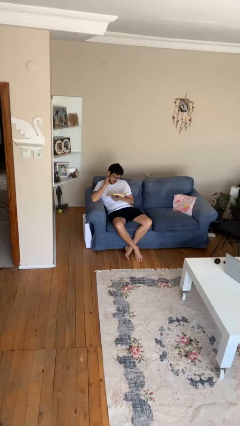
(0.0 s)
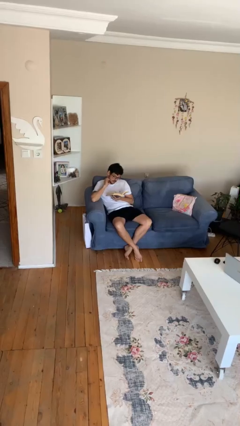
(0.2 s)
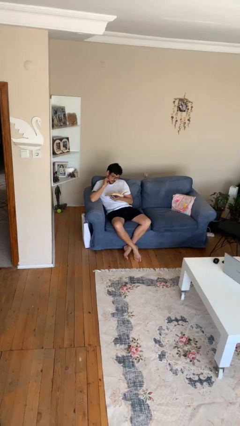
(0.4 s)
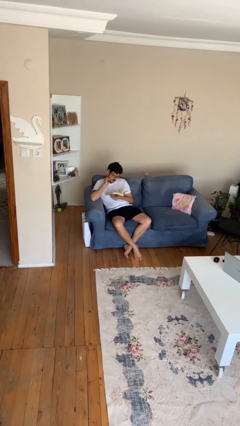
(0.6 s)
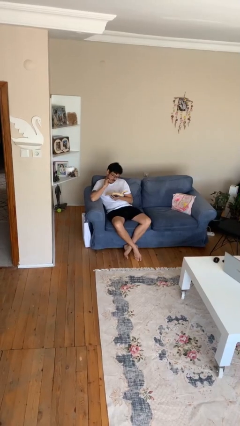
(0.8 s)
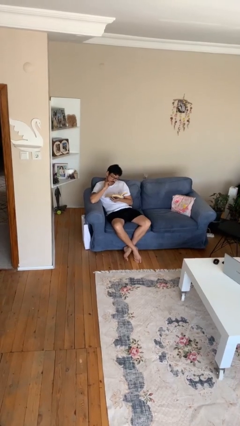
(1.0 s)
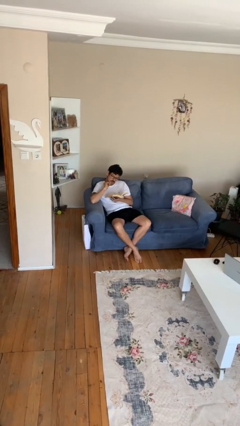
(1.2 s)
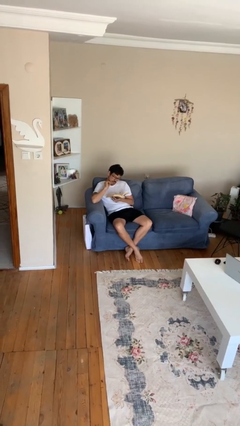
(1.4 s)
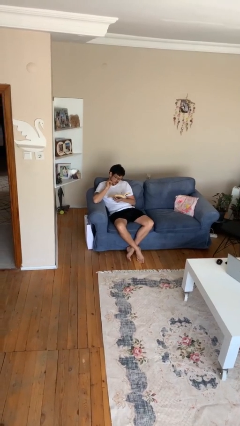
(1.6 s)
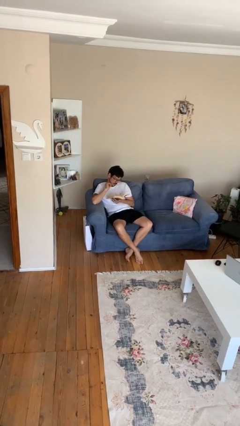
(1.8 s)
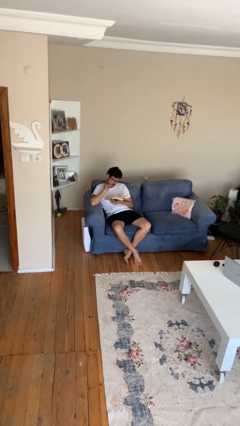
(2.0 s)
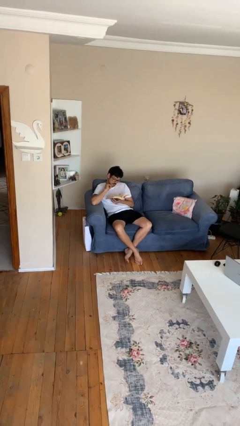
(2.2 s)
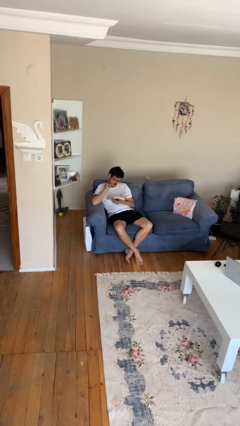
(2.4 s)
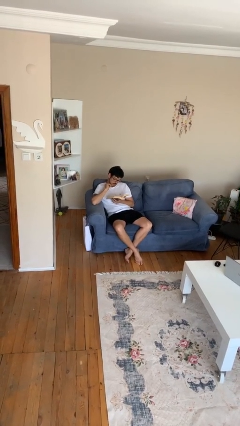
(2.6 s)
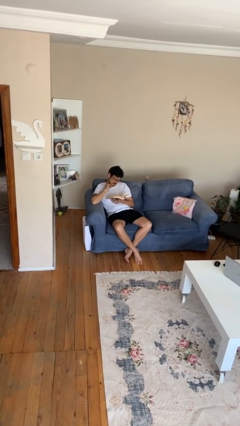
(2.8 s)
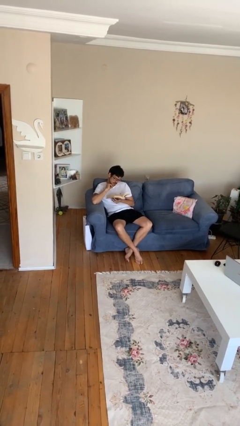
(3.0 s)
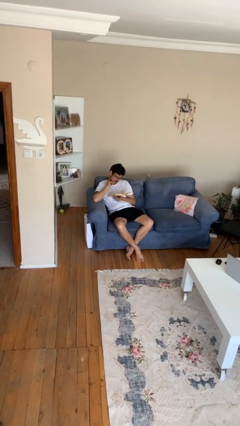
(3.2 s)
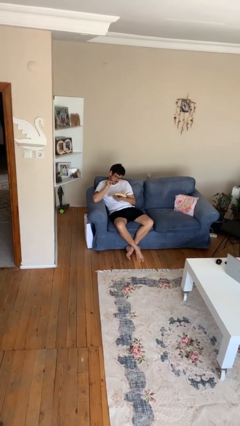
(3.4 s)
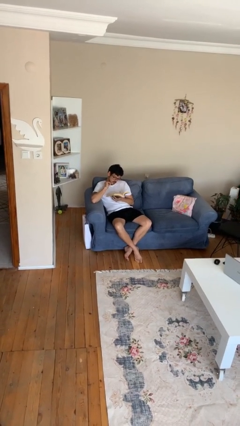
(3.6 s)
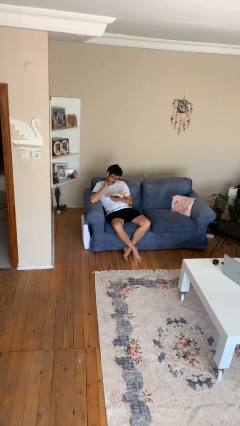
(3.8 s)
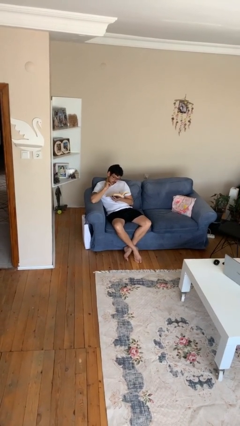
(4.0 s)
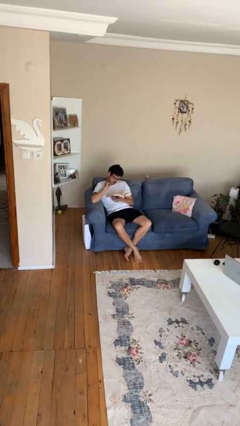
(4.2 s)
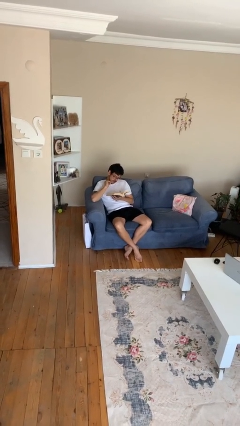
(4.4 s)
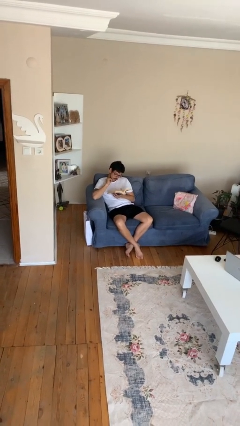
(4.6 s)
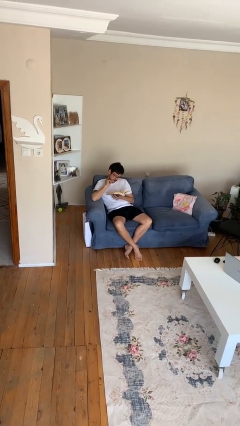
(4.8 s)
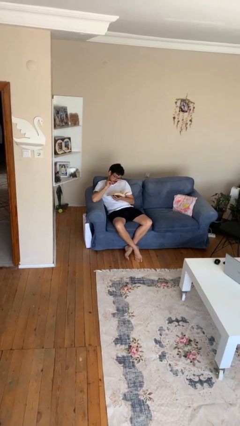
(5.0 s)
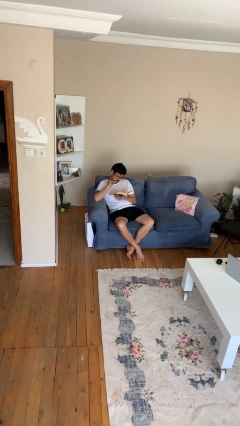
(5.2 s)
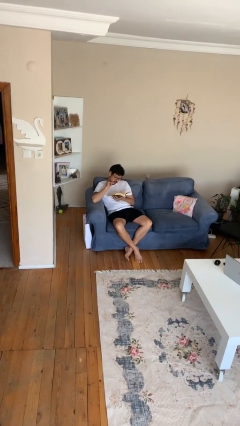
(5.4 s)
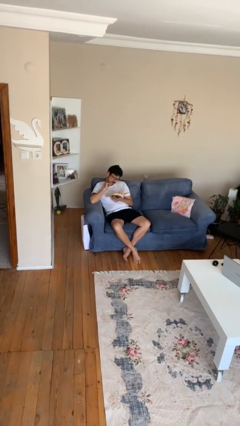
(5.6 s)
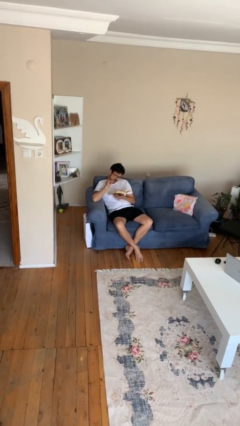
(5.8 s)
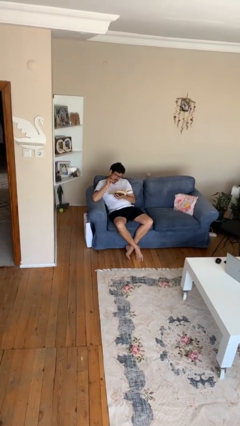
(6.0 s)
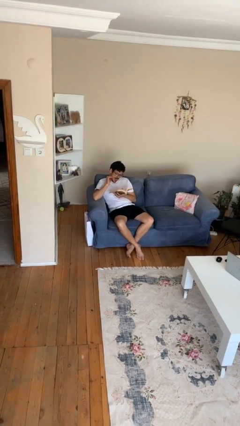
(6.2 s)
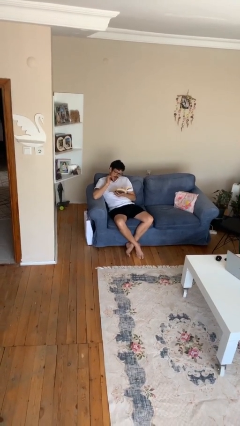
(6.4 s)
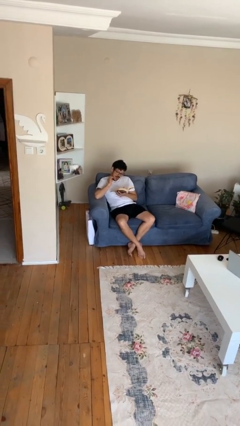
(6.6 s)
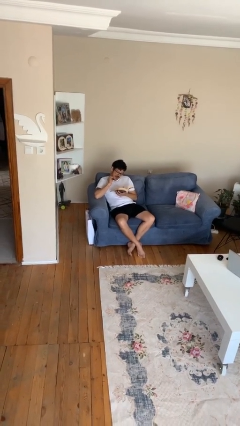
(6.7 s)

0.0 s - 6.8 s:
person reads document

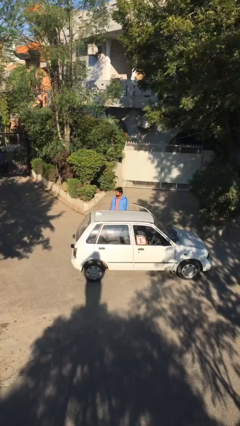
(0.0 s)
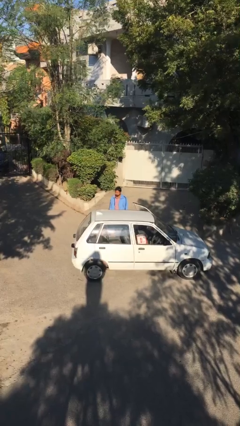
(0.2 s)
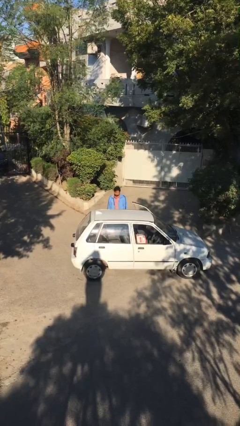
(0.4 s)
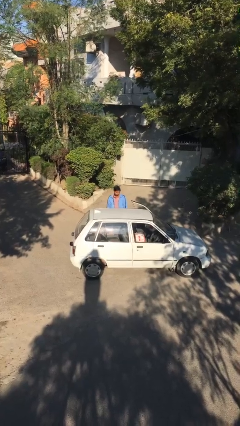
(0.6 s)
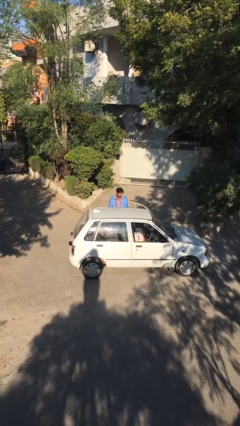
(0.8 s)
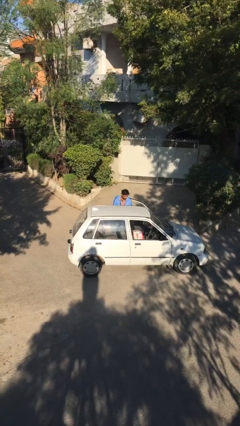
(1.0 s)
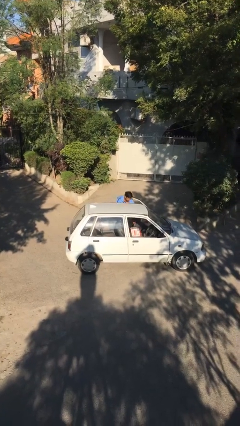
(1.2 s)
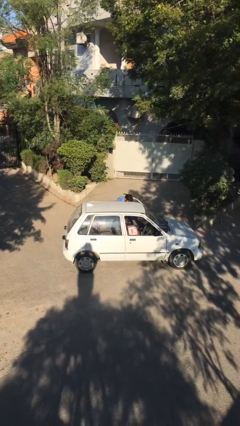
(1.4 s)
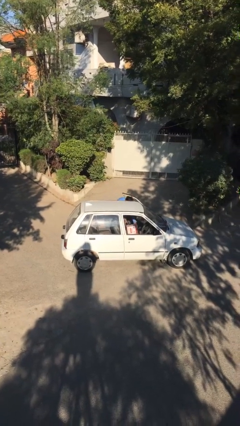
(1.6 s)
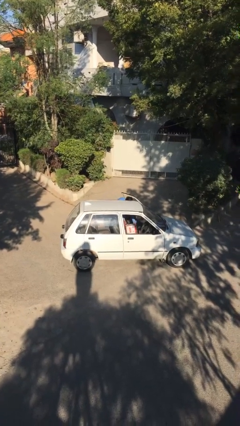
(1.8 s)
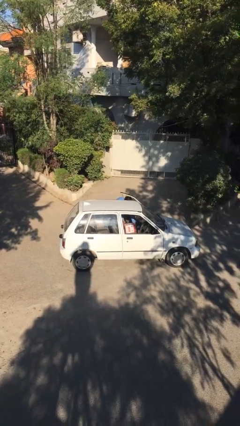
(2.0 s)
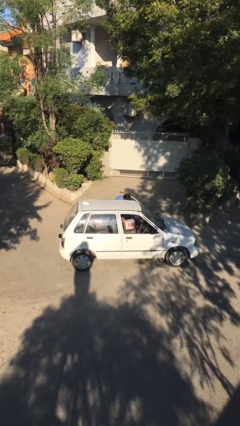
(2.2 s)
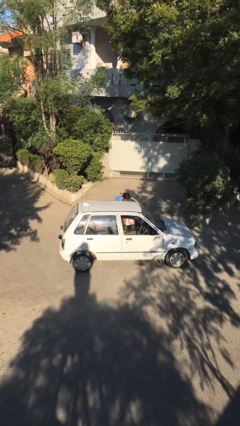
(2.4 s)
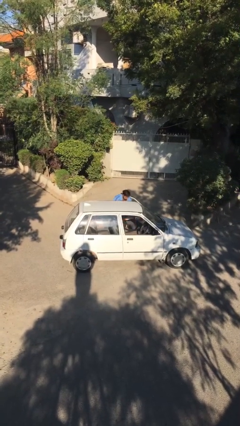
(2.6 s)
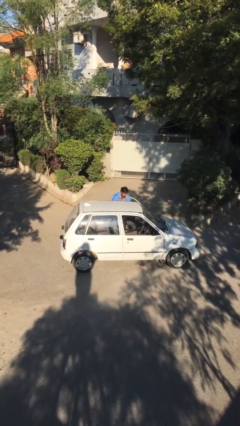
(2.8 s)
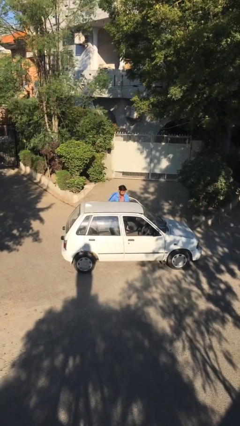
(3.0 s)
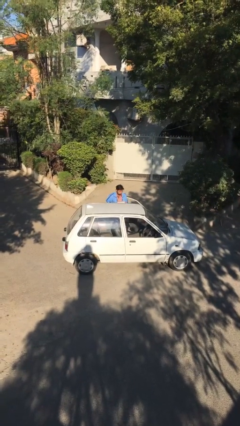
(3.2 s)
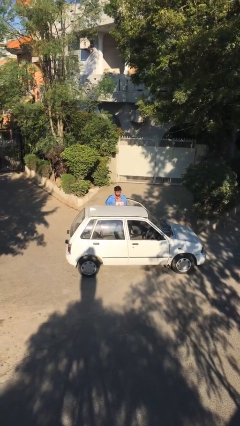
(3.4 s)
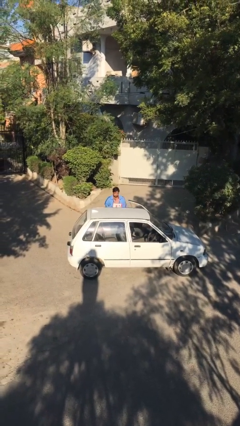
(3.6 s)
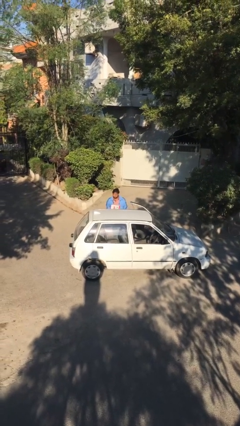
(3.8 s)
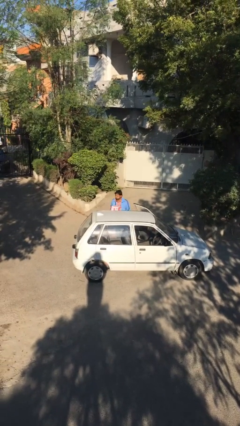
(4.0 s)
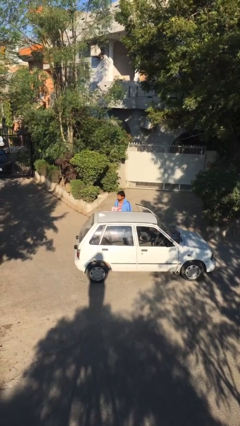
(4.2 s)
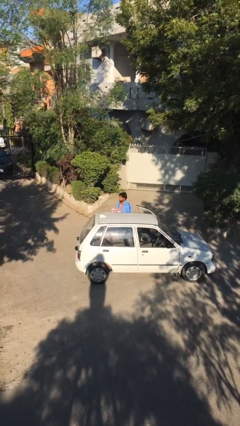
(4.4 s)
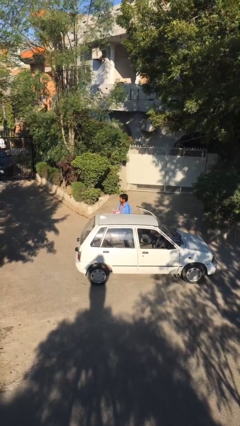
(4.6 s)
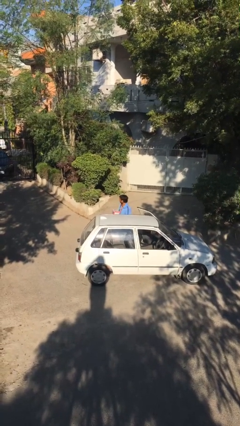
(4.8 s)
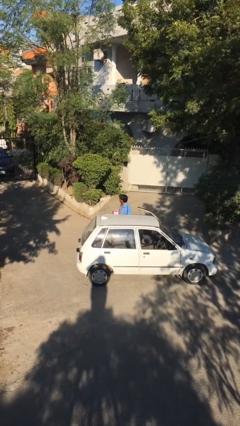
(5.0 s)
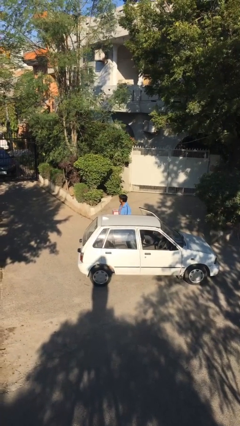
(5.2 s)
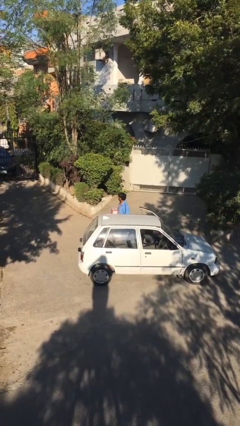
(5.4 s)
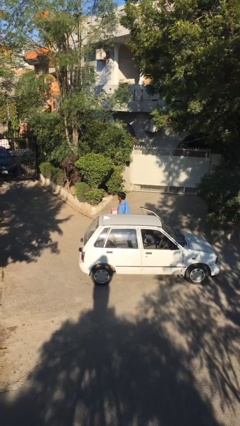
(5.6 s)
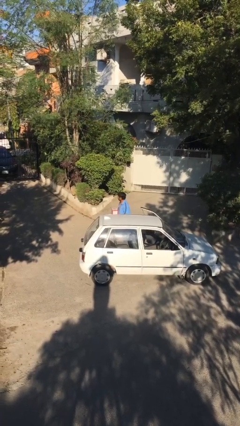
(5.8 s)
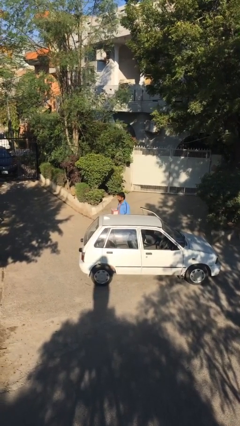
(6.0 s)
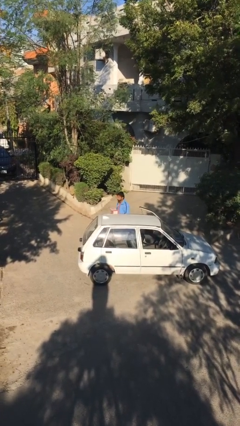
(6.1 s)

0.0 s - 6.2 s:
person unloads car

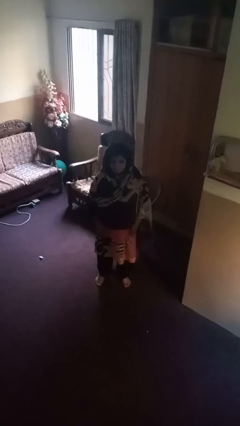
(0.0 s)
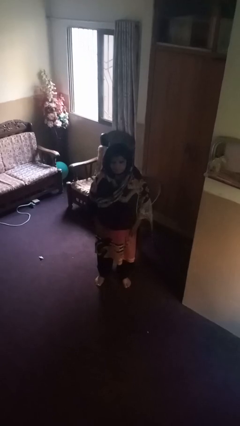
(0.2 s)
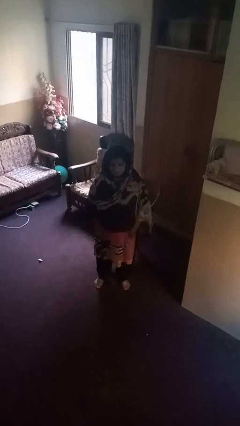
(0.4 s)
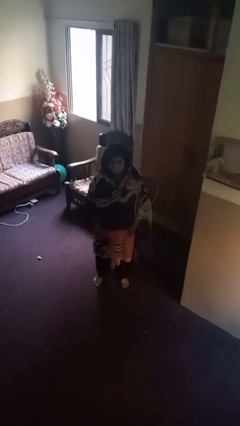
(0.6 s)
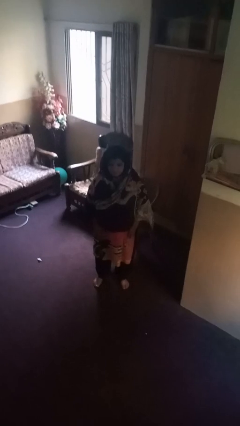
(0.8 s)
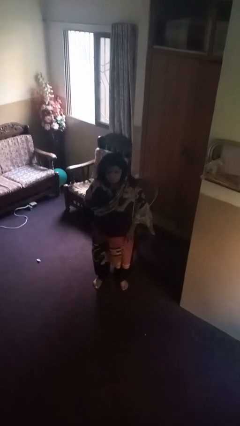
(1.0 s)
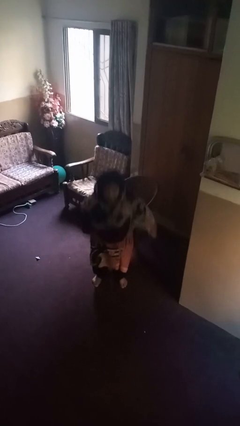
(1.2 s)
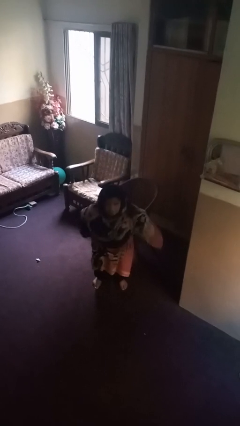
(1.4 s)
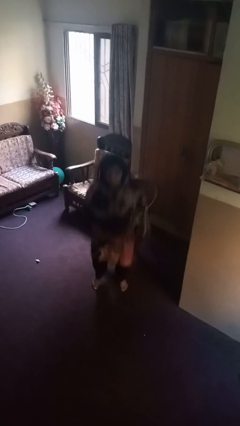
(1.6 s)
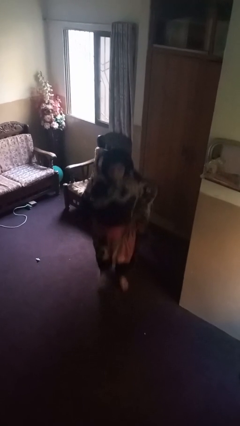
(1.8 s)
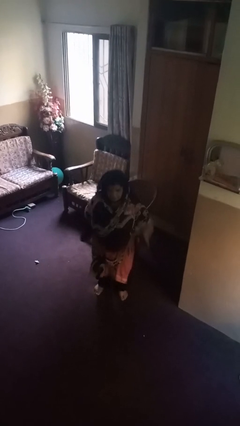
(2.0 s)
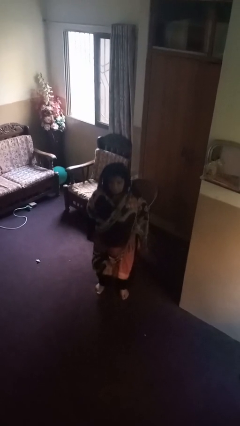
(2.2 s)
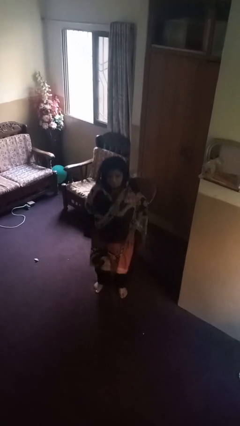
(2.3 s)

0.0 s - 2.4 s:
person jumps

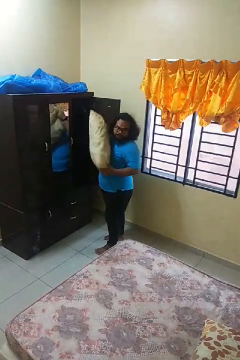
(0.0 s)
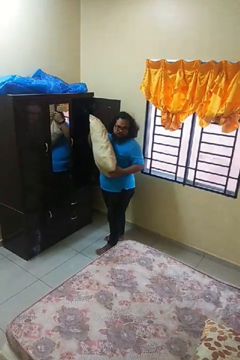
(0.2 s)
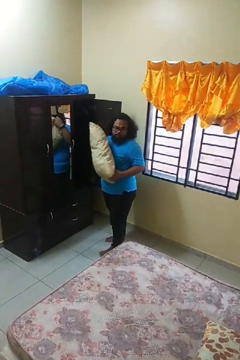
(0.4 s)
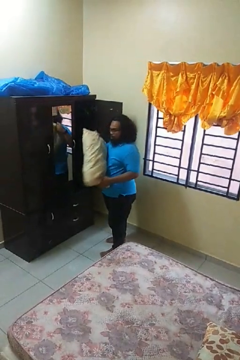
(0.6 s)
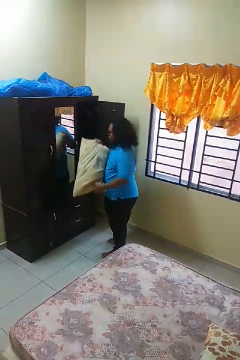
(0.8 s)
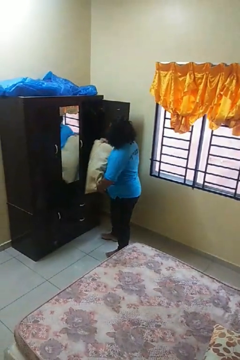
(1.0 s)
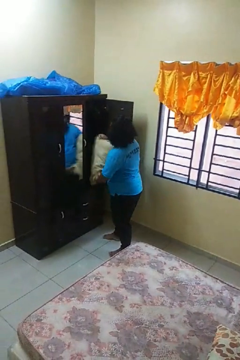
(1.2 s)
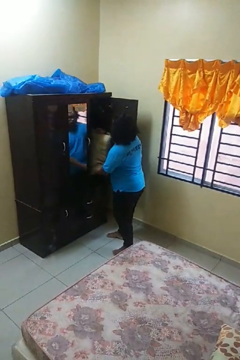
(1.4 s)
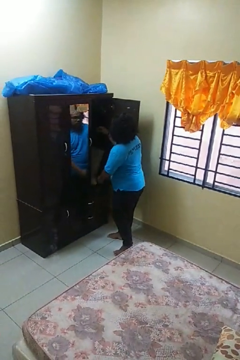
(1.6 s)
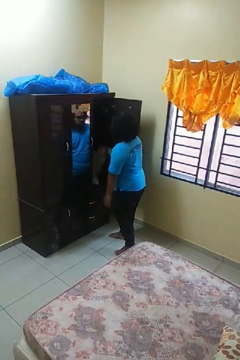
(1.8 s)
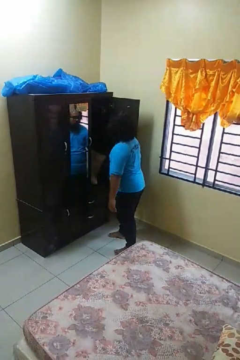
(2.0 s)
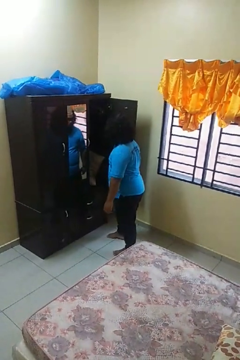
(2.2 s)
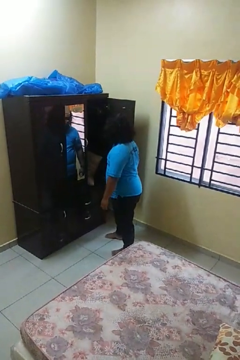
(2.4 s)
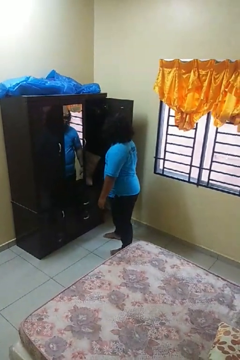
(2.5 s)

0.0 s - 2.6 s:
person puts down object into cabinet
